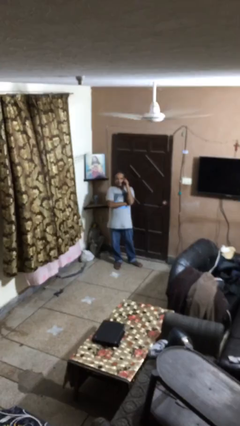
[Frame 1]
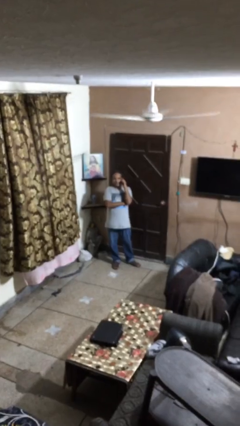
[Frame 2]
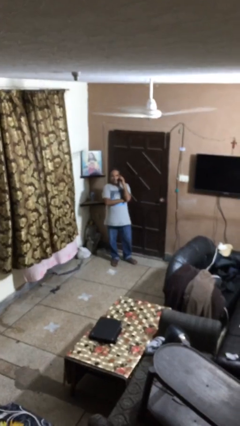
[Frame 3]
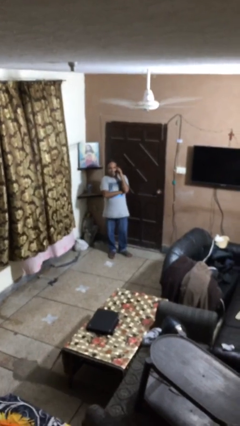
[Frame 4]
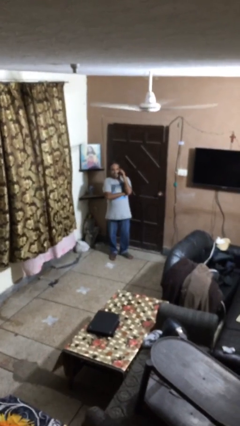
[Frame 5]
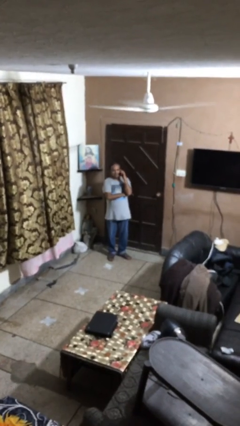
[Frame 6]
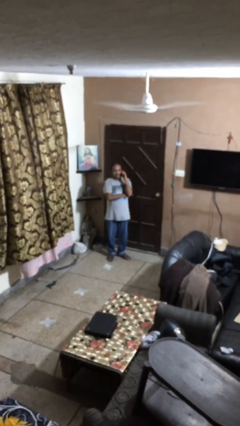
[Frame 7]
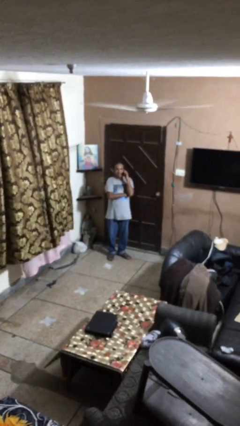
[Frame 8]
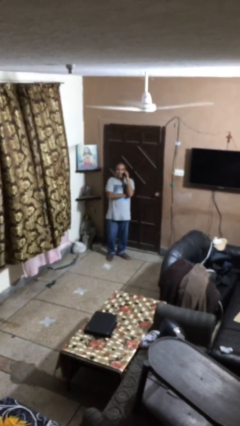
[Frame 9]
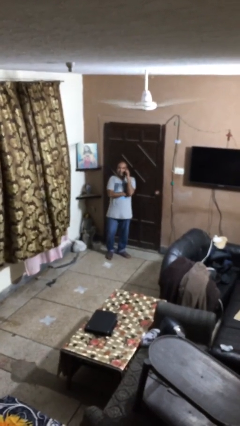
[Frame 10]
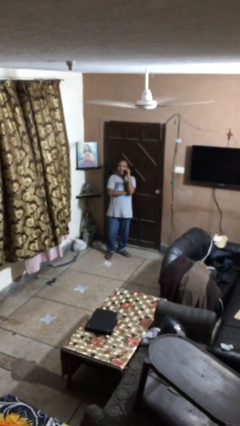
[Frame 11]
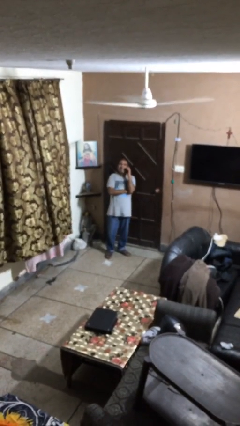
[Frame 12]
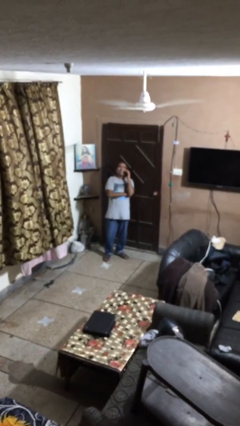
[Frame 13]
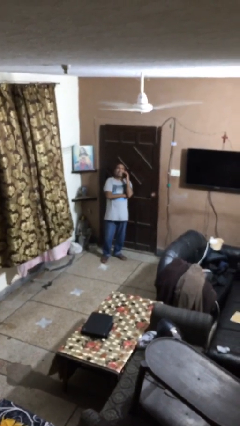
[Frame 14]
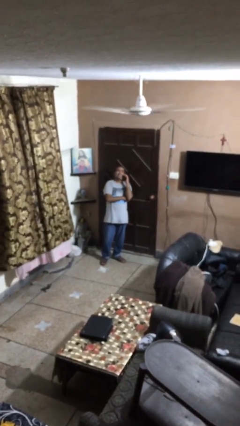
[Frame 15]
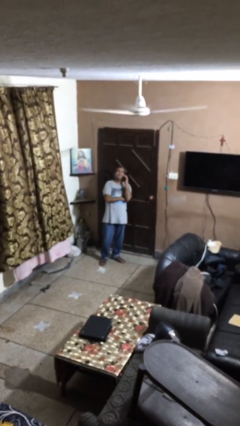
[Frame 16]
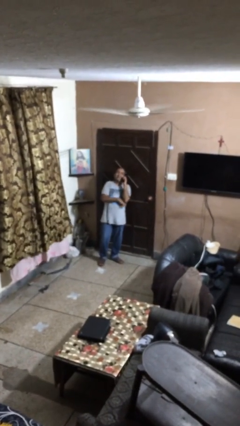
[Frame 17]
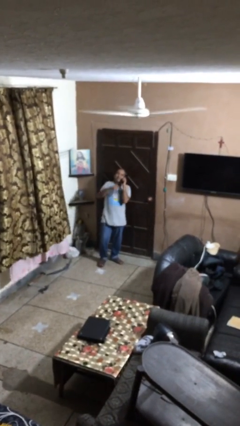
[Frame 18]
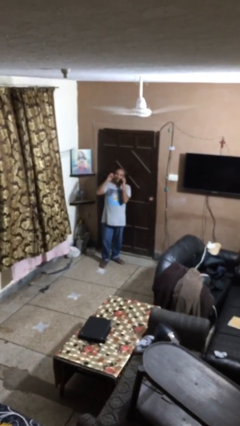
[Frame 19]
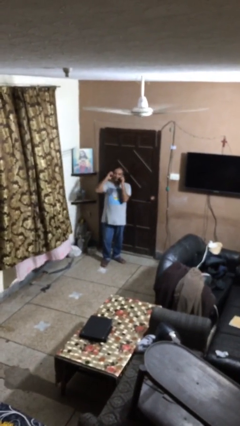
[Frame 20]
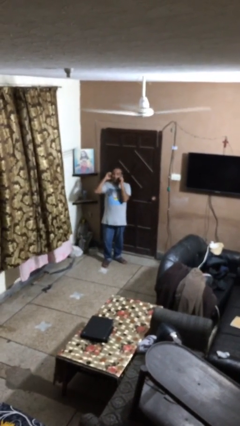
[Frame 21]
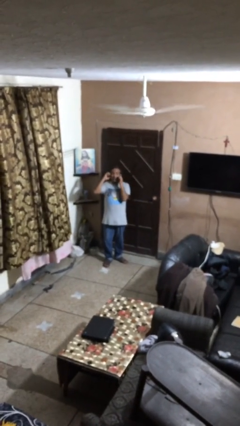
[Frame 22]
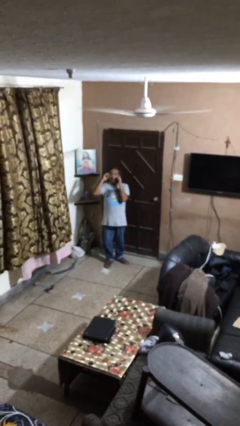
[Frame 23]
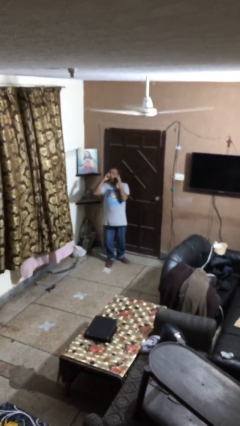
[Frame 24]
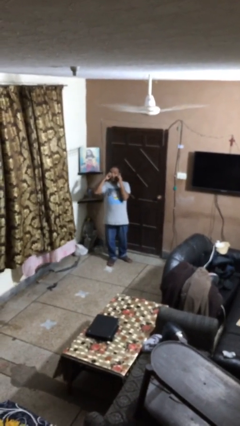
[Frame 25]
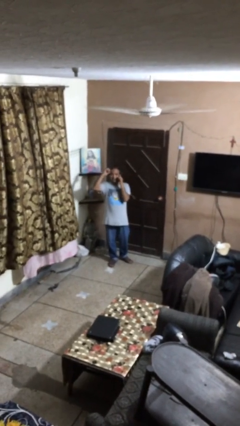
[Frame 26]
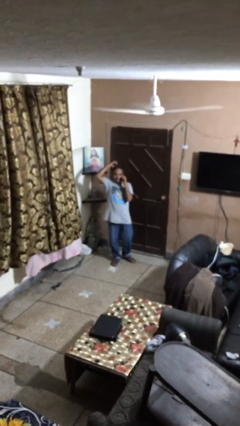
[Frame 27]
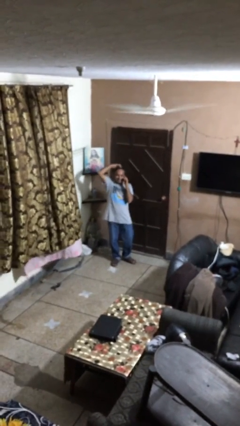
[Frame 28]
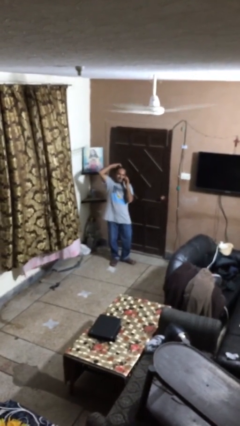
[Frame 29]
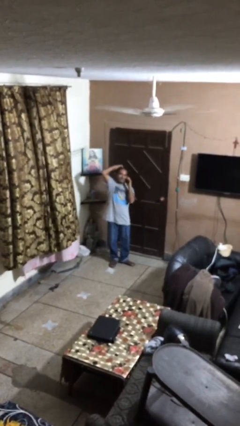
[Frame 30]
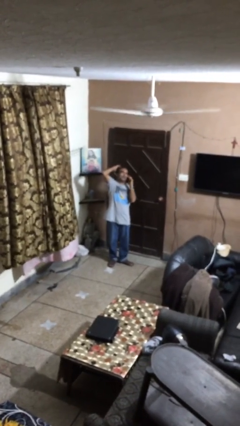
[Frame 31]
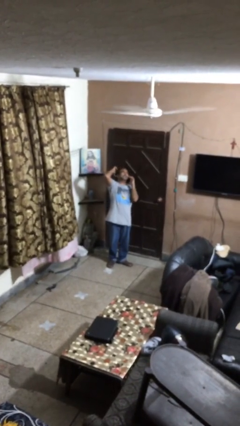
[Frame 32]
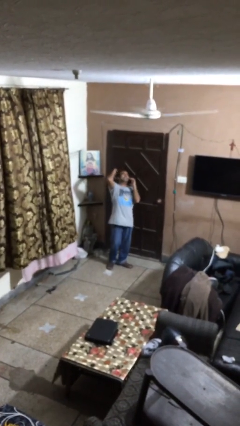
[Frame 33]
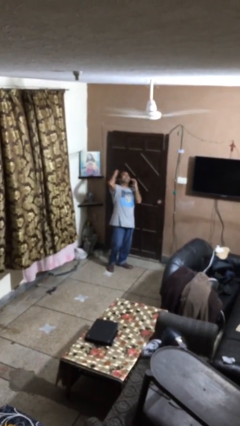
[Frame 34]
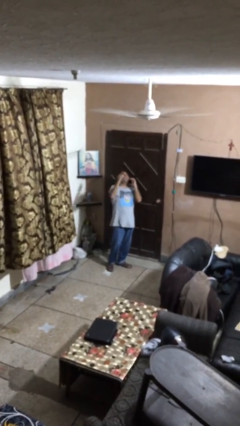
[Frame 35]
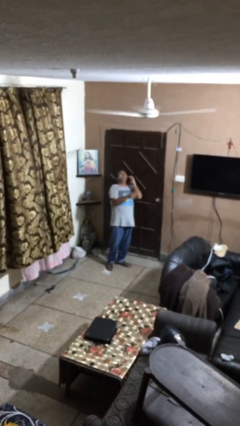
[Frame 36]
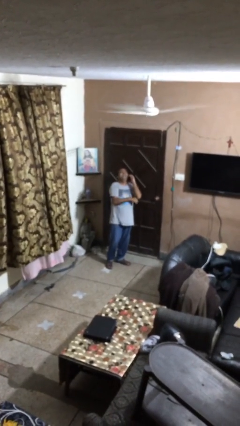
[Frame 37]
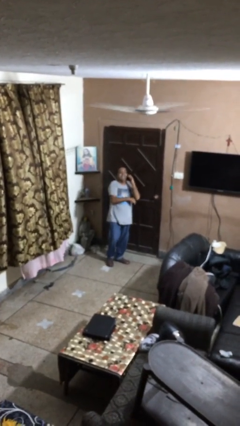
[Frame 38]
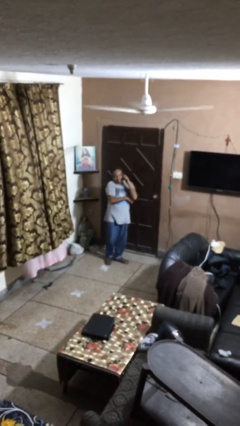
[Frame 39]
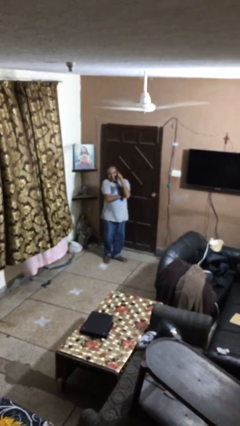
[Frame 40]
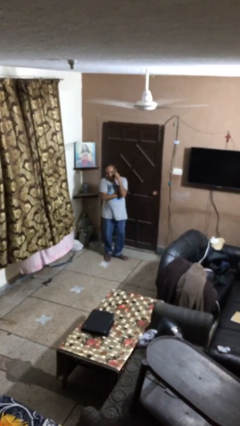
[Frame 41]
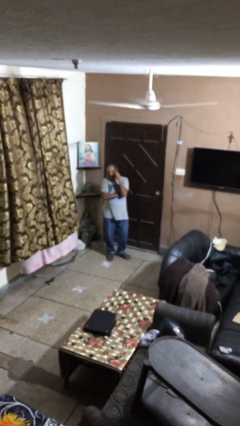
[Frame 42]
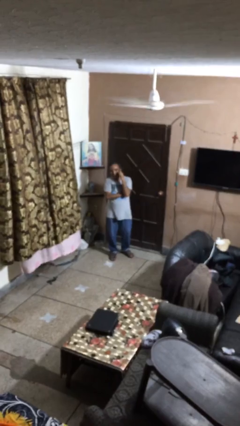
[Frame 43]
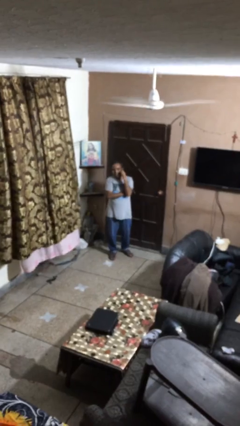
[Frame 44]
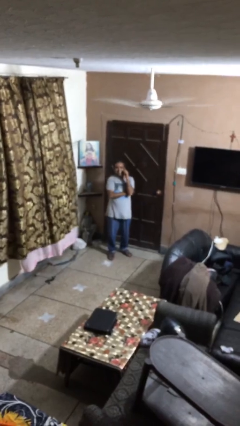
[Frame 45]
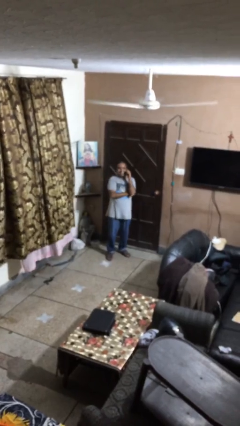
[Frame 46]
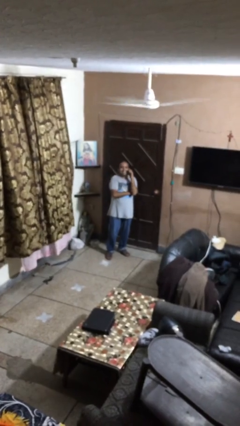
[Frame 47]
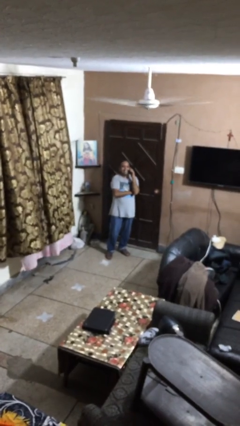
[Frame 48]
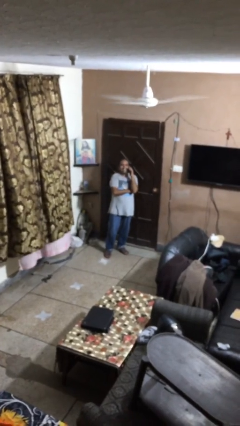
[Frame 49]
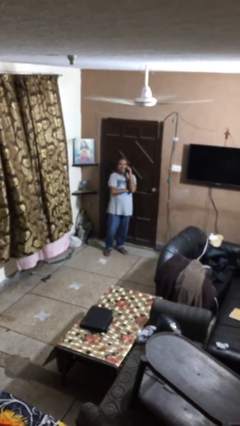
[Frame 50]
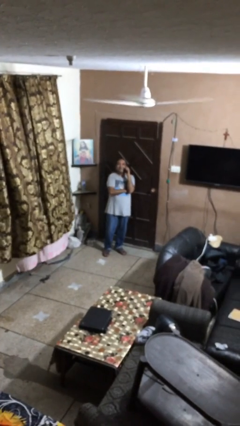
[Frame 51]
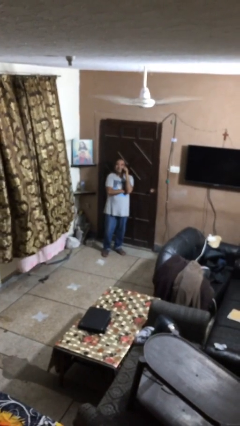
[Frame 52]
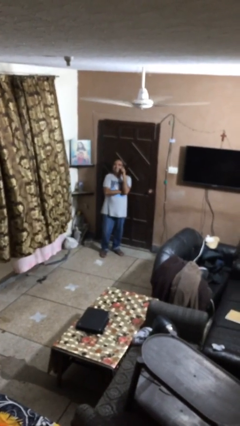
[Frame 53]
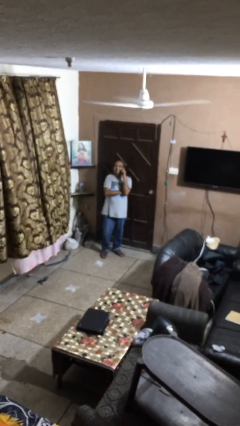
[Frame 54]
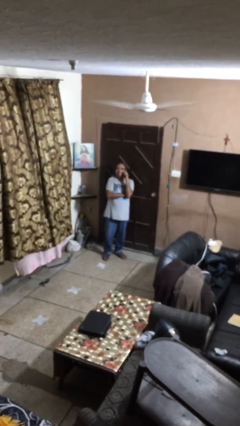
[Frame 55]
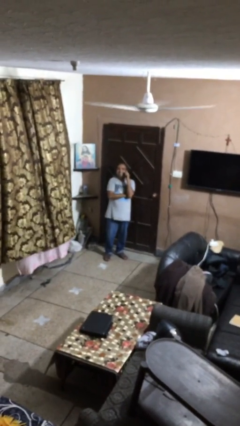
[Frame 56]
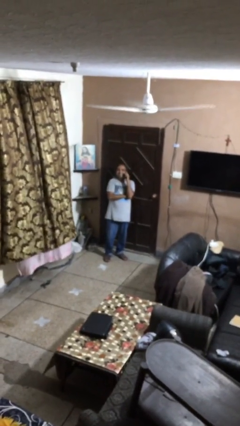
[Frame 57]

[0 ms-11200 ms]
person talks on phone

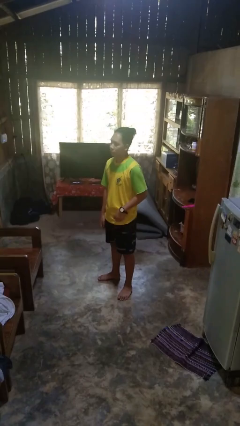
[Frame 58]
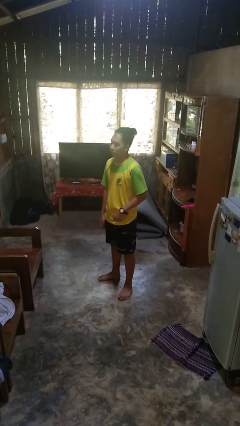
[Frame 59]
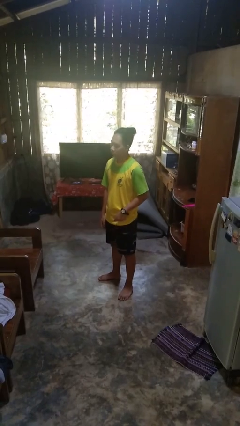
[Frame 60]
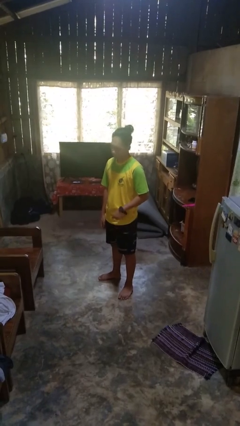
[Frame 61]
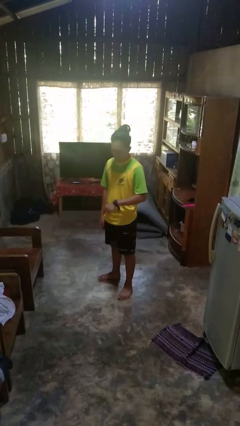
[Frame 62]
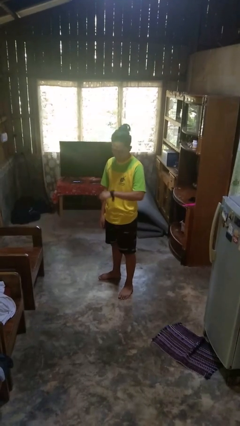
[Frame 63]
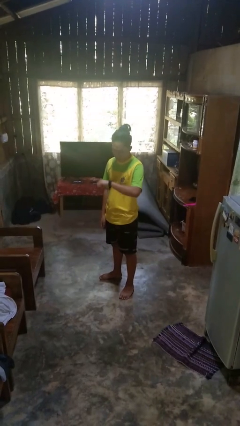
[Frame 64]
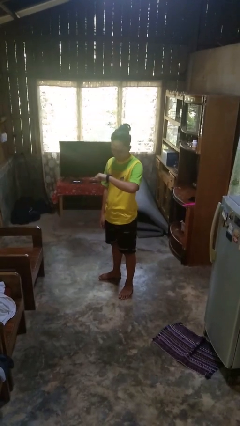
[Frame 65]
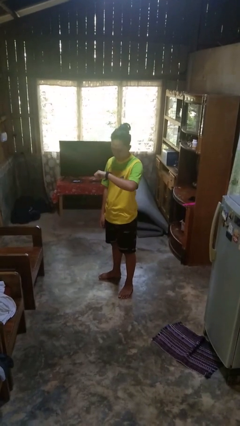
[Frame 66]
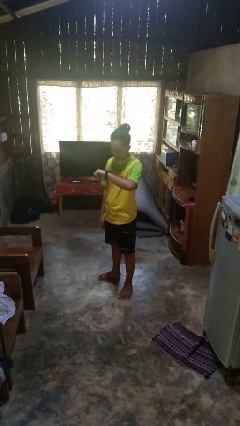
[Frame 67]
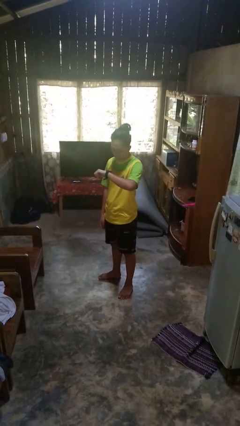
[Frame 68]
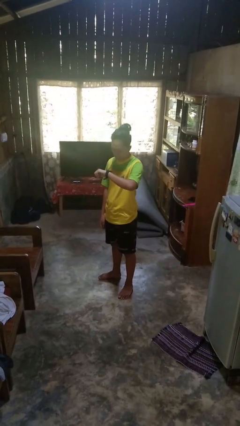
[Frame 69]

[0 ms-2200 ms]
person looks at wristwatch

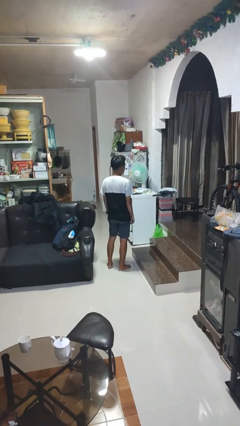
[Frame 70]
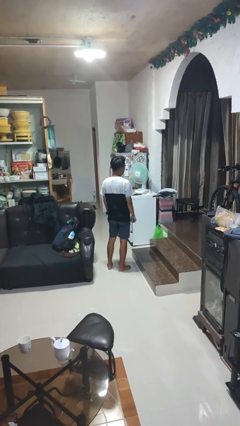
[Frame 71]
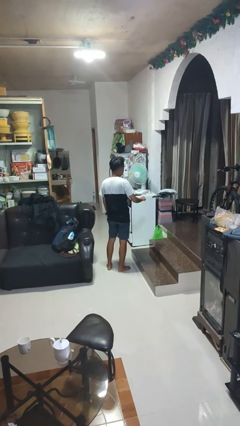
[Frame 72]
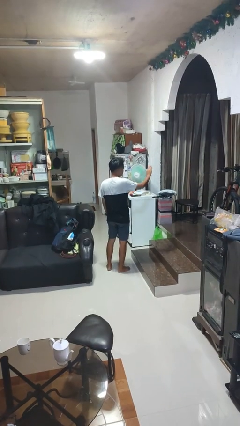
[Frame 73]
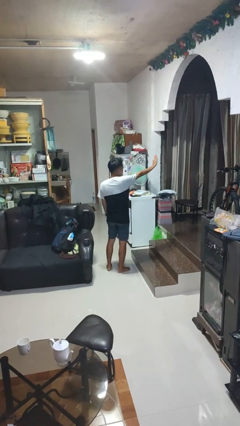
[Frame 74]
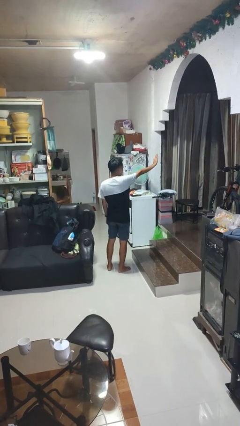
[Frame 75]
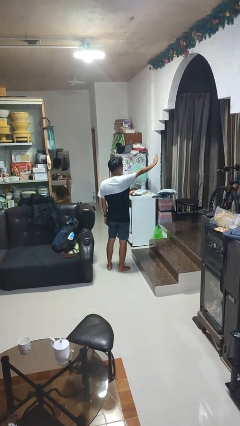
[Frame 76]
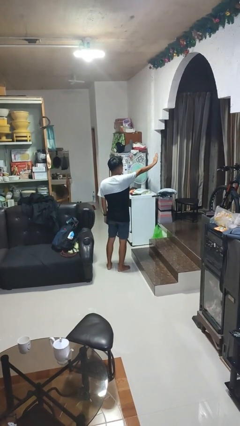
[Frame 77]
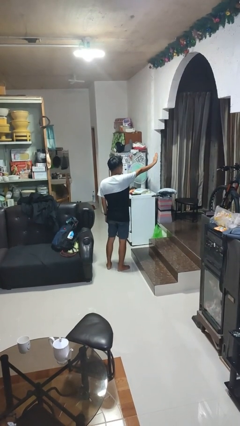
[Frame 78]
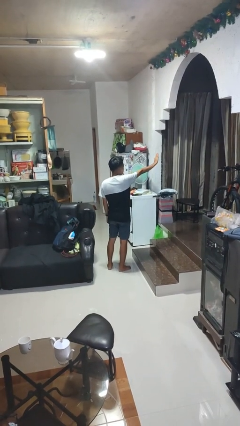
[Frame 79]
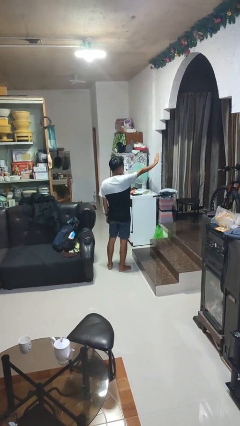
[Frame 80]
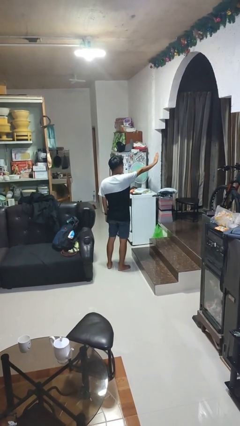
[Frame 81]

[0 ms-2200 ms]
person gestures stop

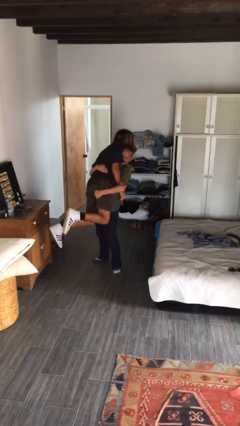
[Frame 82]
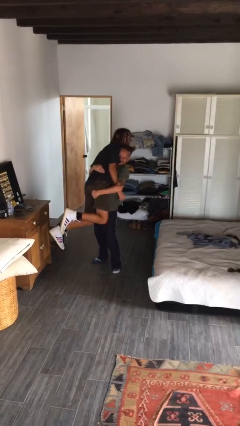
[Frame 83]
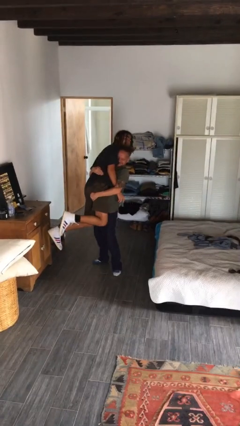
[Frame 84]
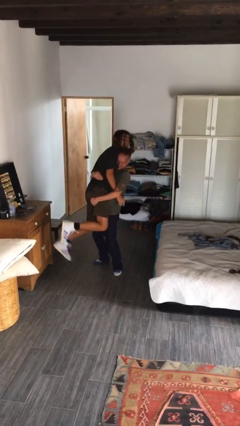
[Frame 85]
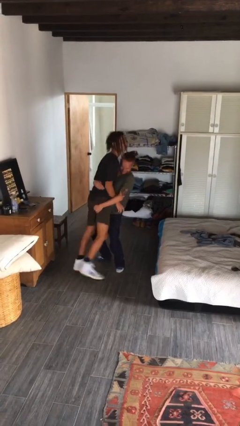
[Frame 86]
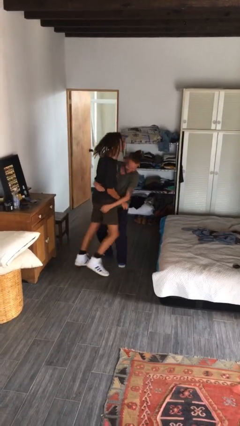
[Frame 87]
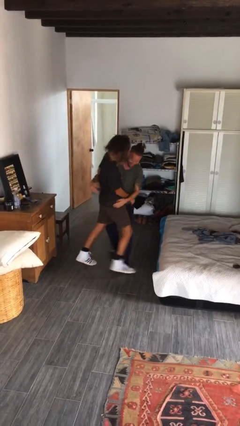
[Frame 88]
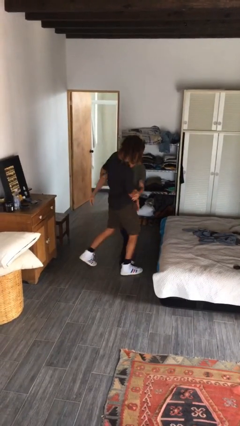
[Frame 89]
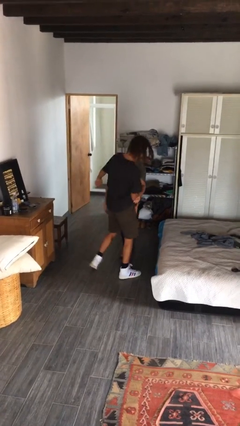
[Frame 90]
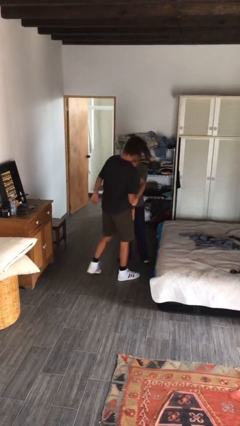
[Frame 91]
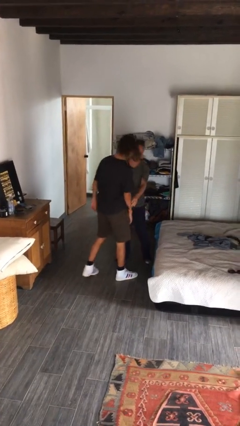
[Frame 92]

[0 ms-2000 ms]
person puts down person

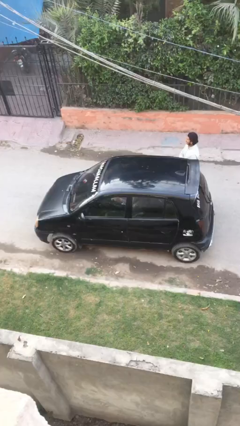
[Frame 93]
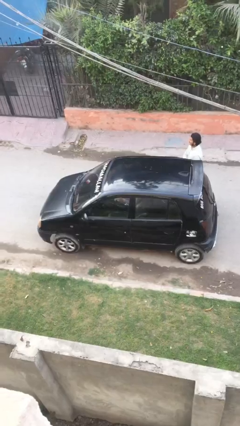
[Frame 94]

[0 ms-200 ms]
car picks up person
